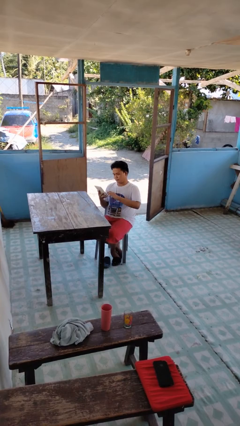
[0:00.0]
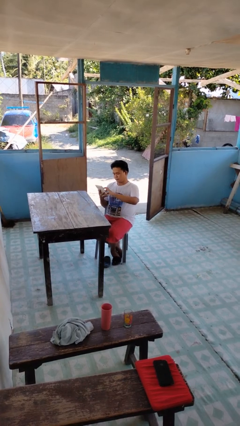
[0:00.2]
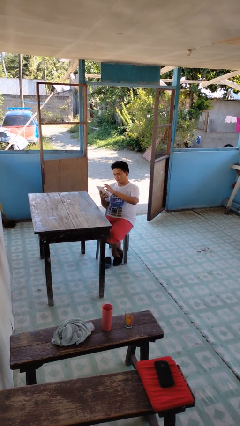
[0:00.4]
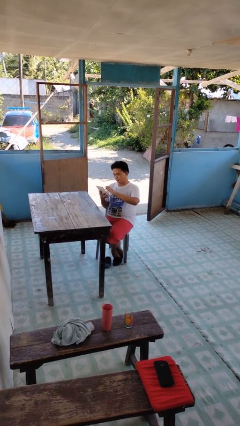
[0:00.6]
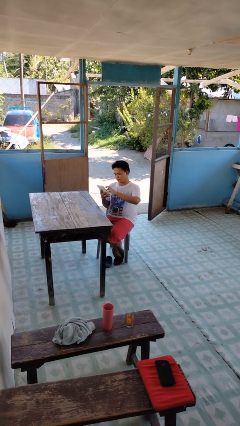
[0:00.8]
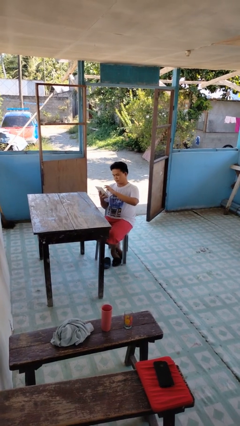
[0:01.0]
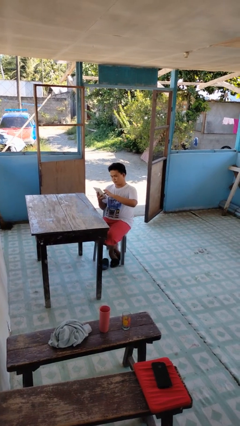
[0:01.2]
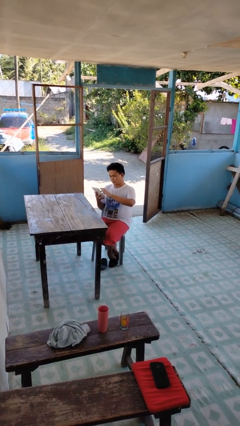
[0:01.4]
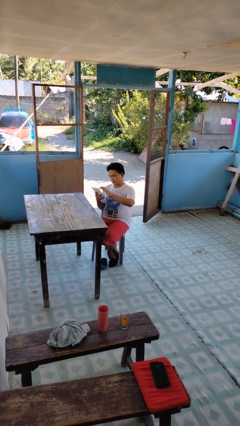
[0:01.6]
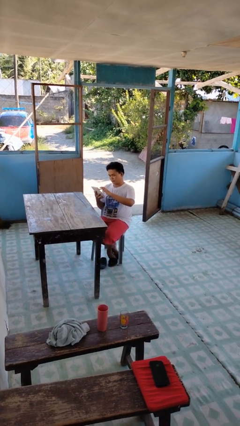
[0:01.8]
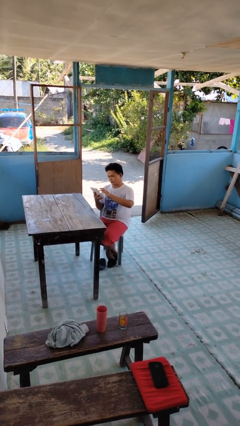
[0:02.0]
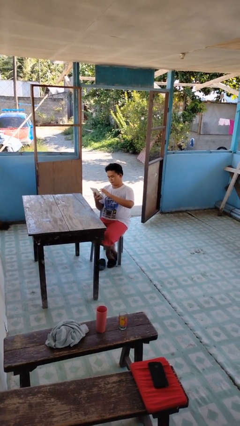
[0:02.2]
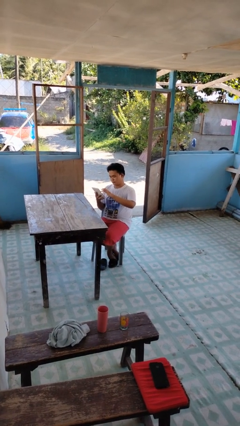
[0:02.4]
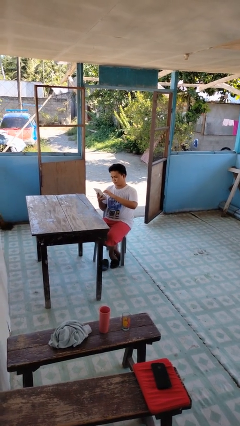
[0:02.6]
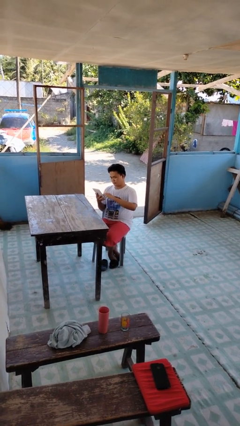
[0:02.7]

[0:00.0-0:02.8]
person interacts with tablet

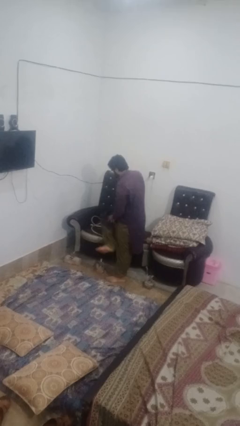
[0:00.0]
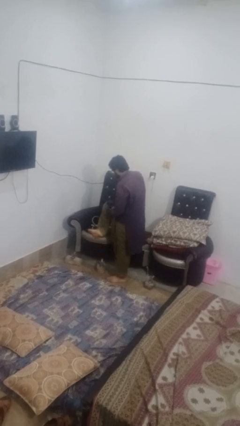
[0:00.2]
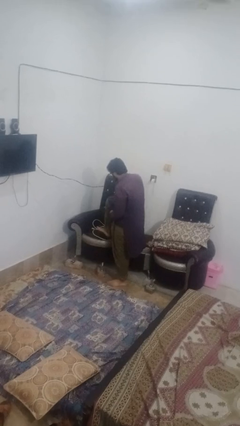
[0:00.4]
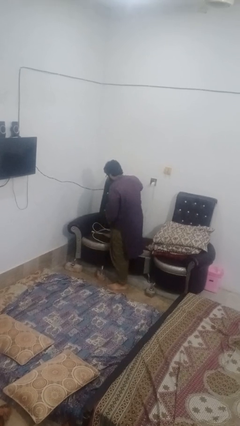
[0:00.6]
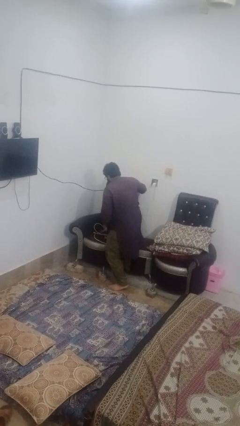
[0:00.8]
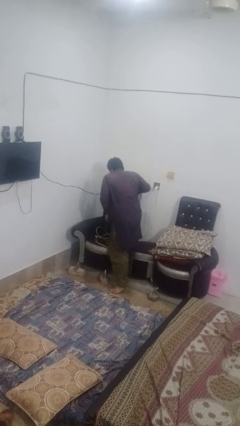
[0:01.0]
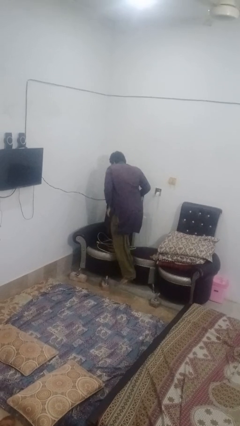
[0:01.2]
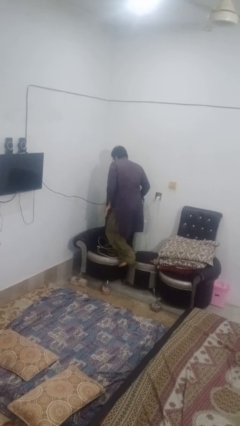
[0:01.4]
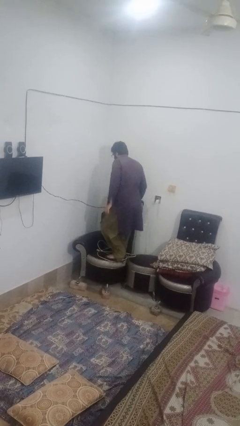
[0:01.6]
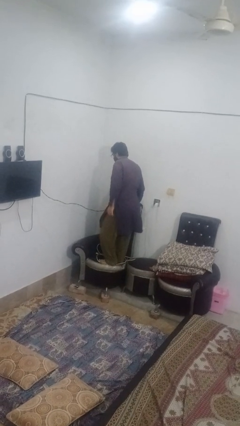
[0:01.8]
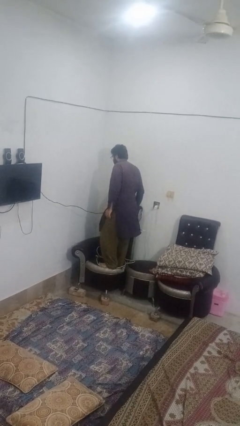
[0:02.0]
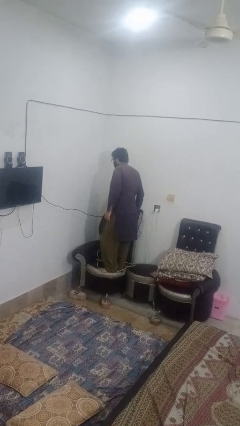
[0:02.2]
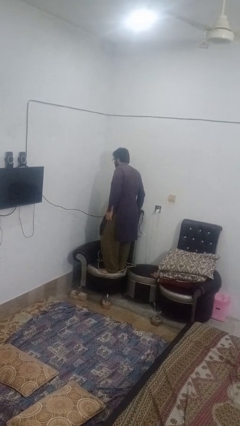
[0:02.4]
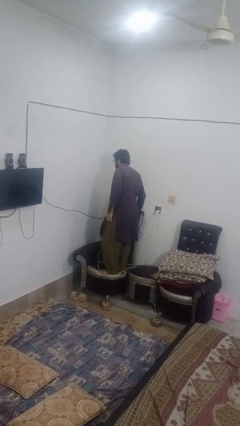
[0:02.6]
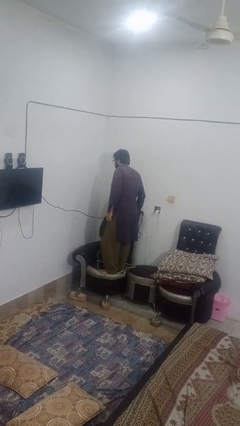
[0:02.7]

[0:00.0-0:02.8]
person climbs on couch

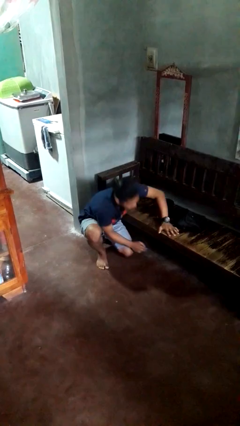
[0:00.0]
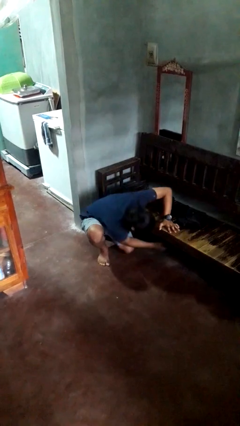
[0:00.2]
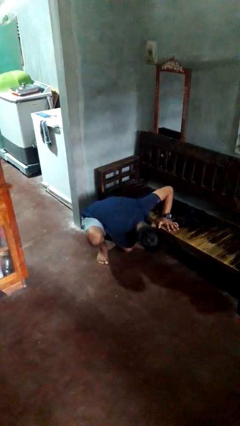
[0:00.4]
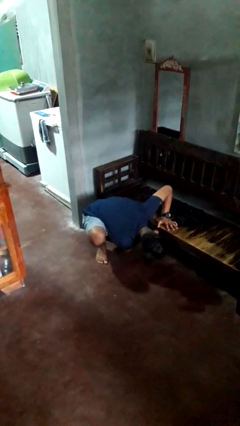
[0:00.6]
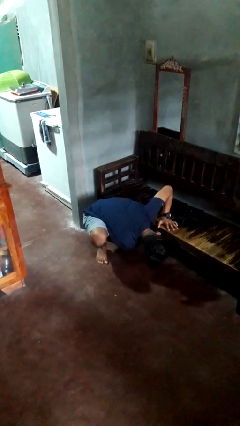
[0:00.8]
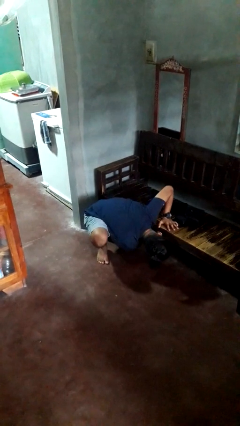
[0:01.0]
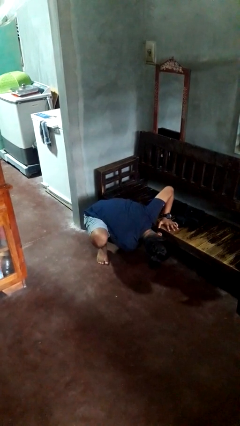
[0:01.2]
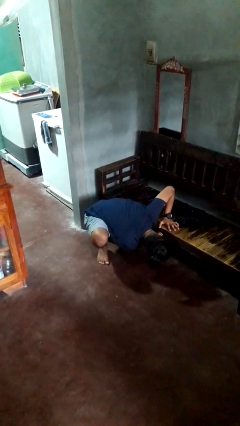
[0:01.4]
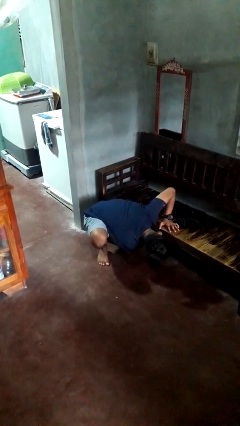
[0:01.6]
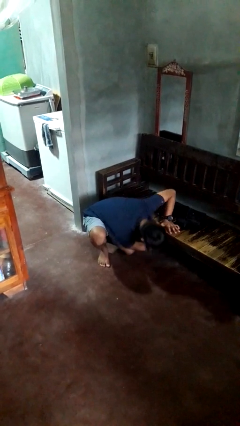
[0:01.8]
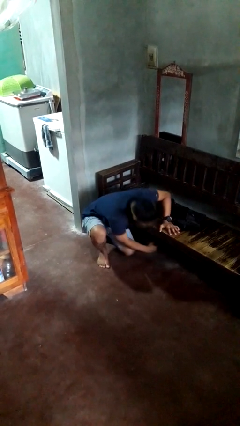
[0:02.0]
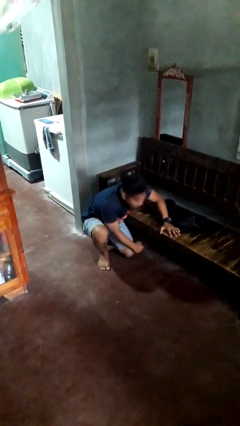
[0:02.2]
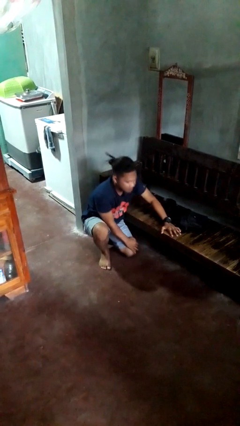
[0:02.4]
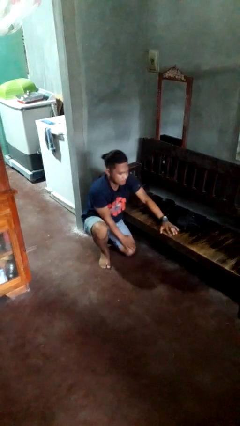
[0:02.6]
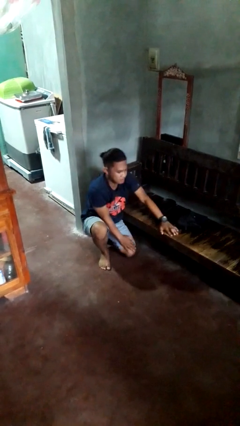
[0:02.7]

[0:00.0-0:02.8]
person searches under couch

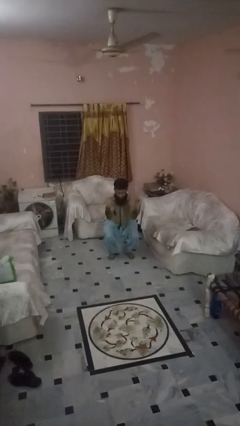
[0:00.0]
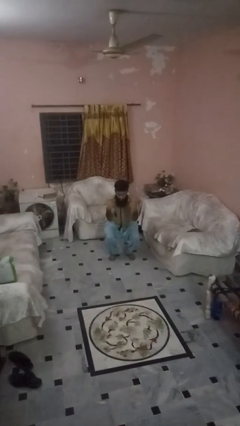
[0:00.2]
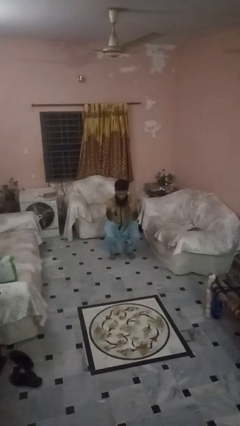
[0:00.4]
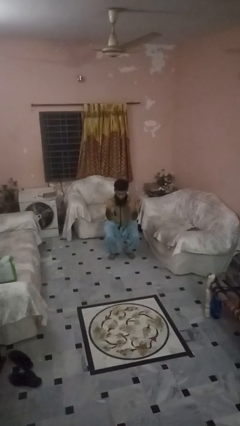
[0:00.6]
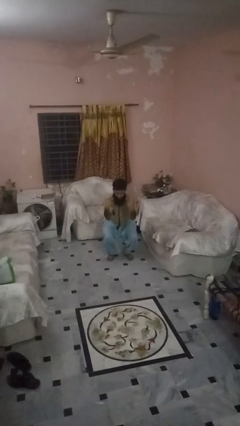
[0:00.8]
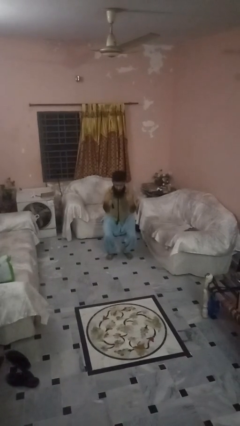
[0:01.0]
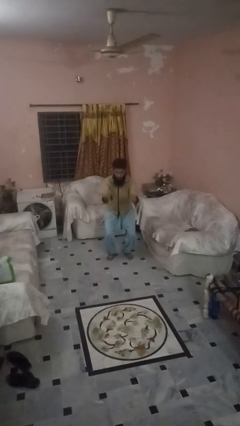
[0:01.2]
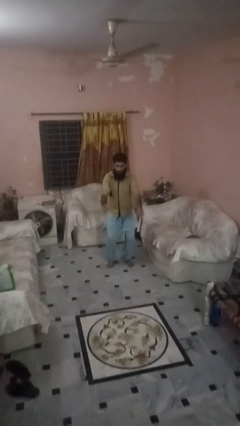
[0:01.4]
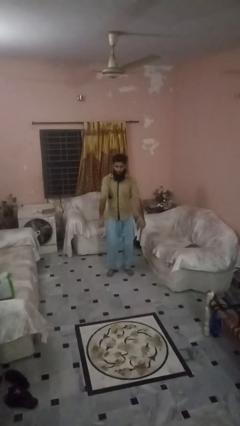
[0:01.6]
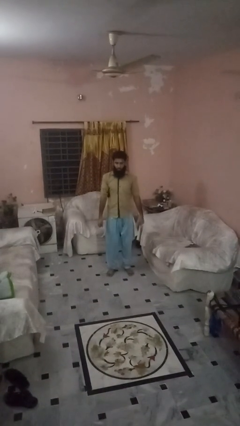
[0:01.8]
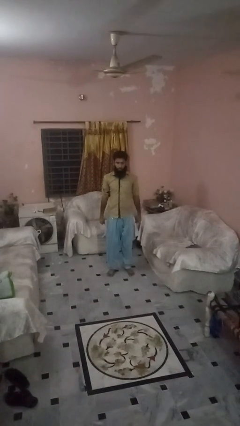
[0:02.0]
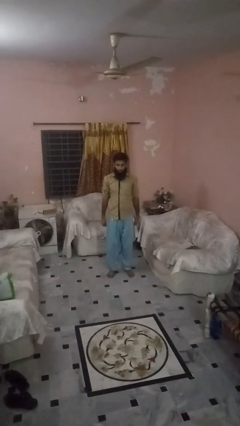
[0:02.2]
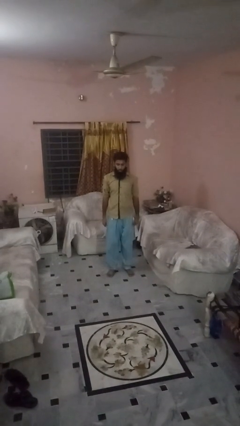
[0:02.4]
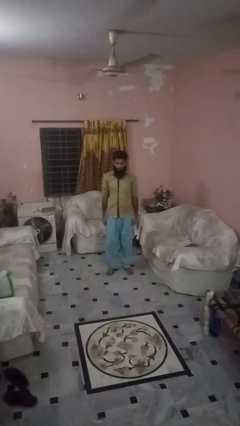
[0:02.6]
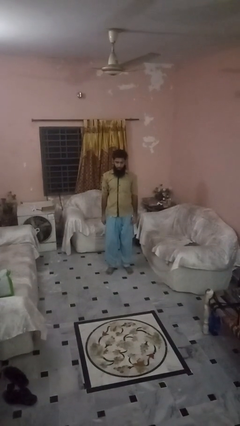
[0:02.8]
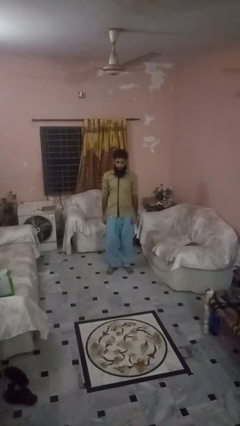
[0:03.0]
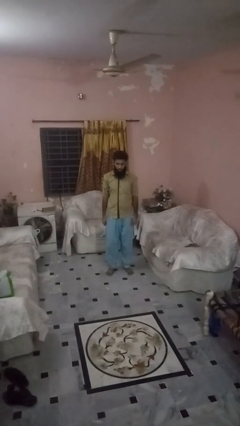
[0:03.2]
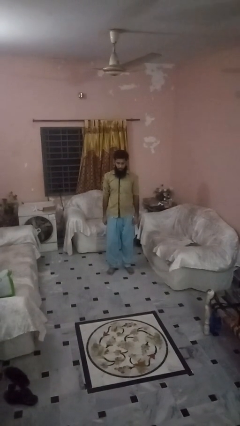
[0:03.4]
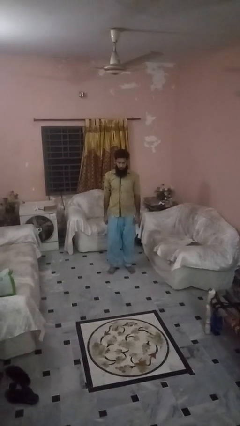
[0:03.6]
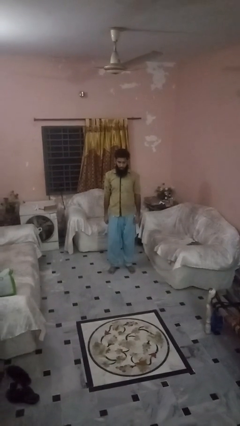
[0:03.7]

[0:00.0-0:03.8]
person stands up

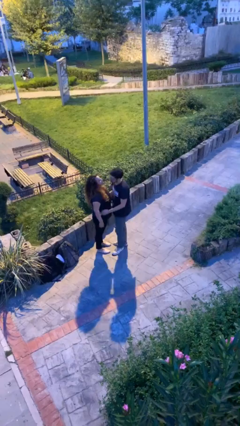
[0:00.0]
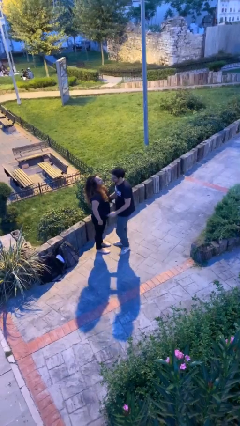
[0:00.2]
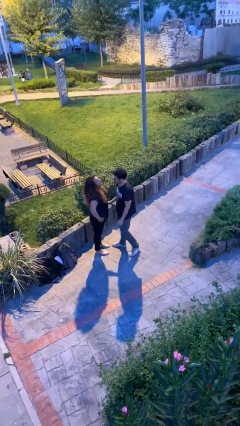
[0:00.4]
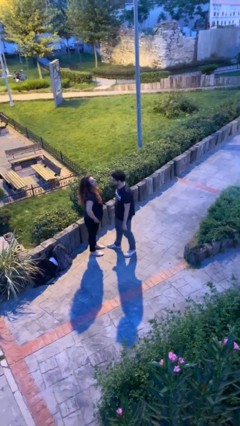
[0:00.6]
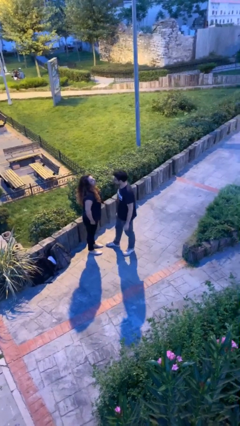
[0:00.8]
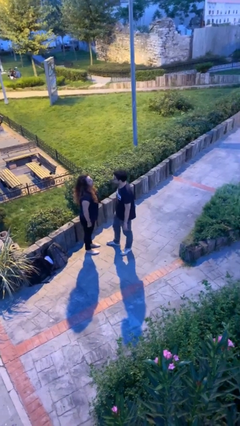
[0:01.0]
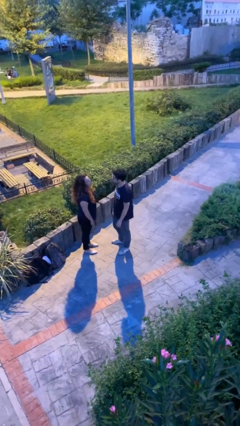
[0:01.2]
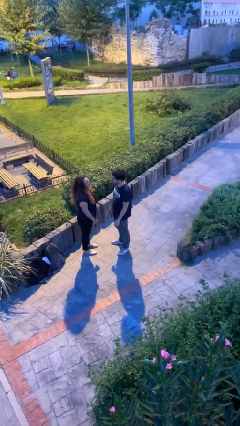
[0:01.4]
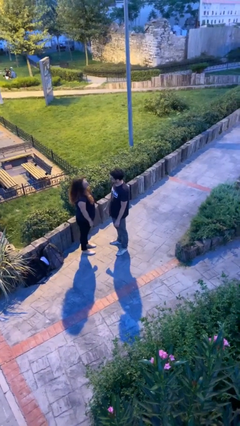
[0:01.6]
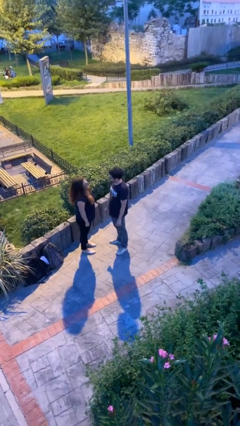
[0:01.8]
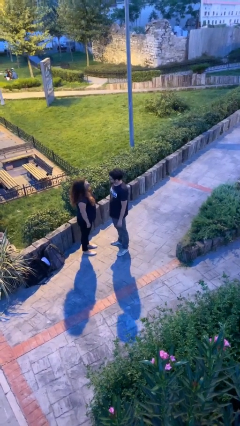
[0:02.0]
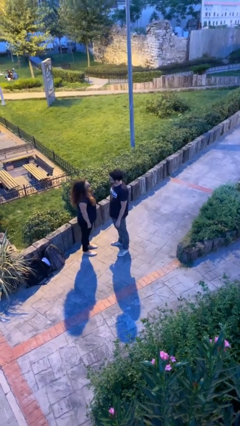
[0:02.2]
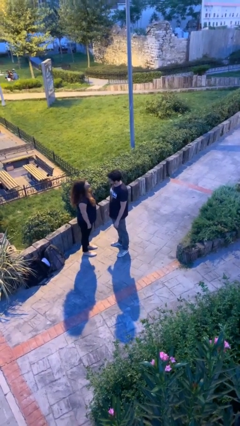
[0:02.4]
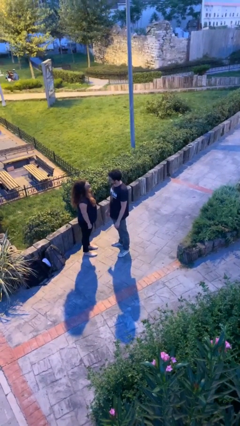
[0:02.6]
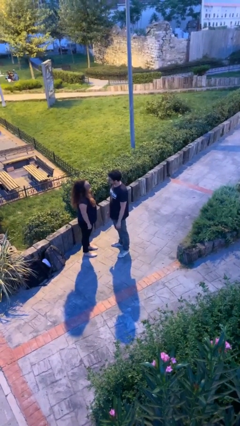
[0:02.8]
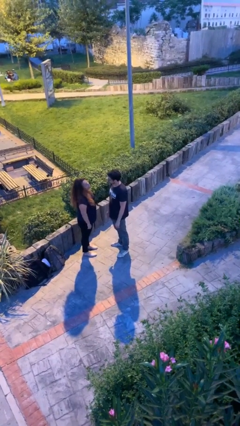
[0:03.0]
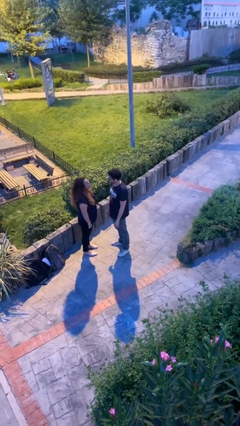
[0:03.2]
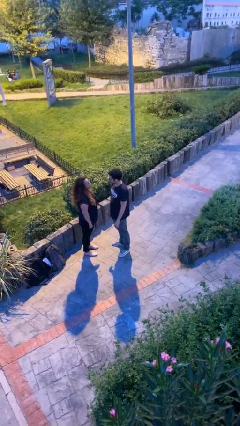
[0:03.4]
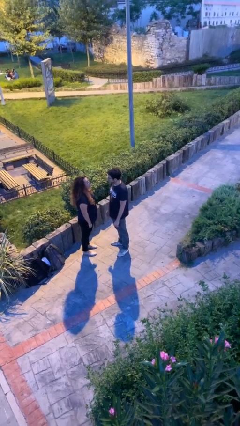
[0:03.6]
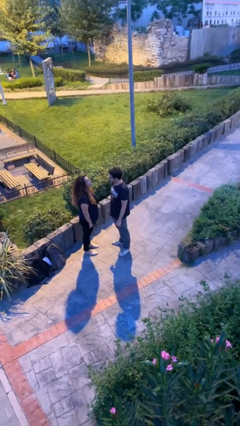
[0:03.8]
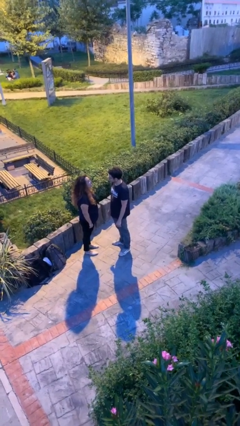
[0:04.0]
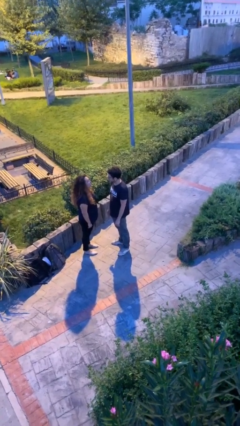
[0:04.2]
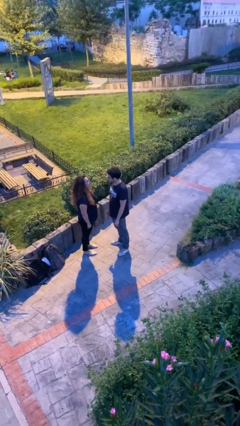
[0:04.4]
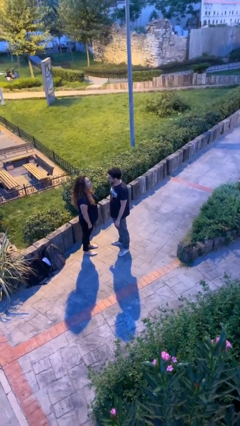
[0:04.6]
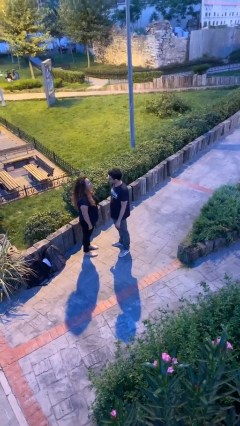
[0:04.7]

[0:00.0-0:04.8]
person talks to person

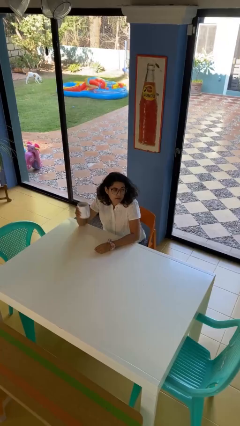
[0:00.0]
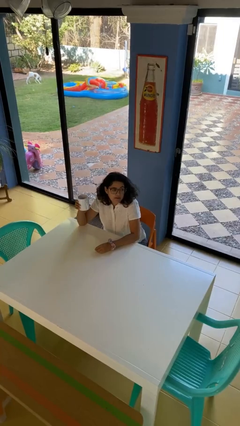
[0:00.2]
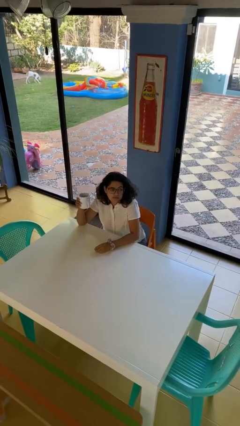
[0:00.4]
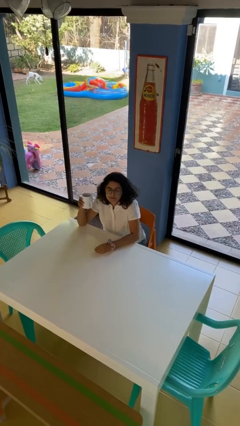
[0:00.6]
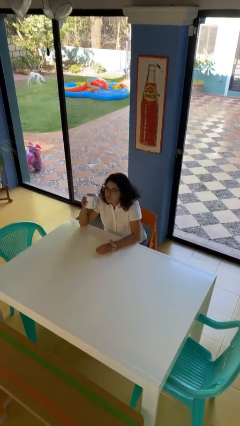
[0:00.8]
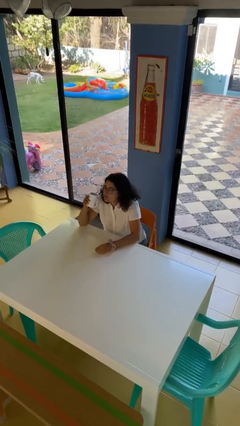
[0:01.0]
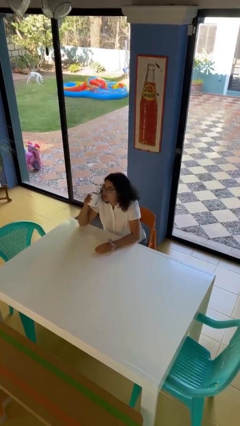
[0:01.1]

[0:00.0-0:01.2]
person picks up object from table
